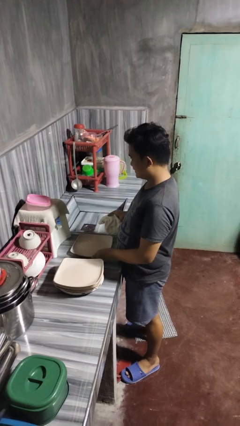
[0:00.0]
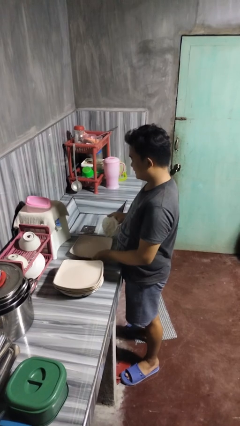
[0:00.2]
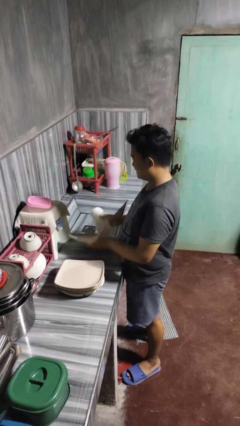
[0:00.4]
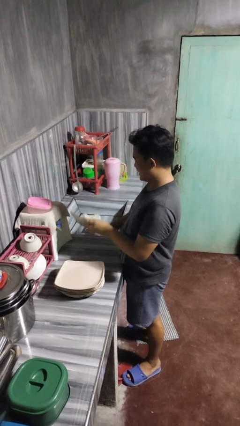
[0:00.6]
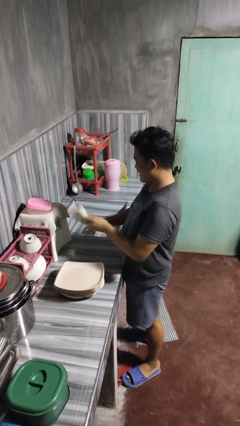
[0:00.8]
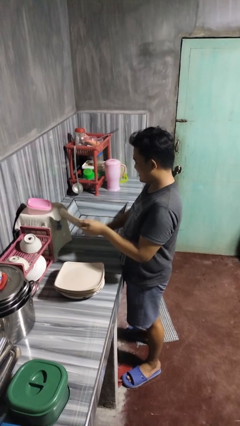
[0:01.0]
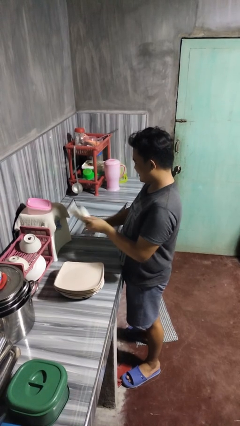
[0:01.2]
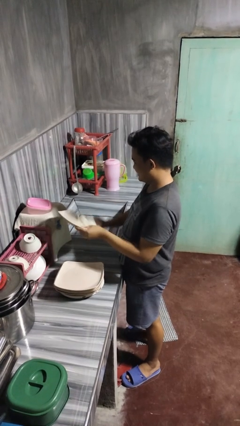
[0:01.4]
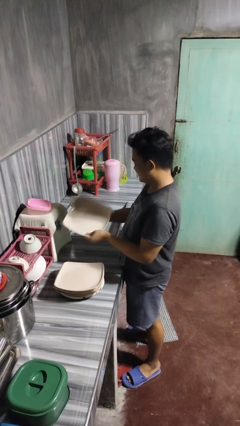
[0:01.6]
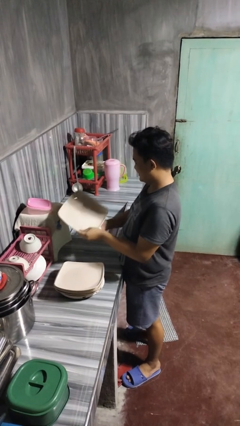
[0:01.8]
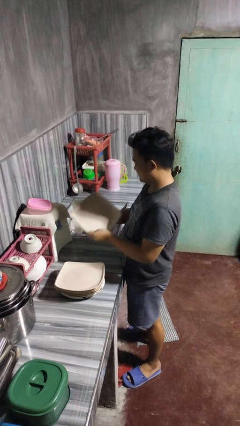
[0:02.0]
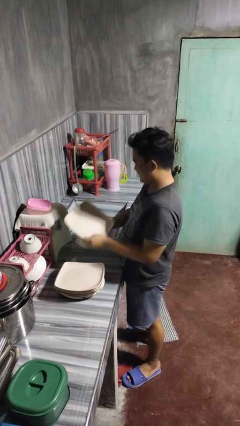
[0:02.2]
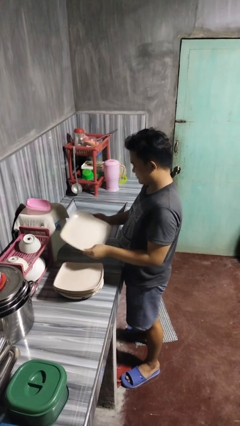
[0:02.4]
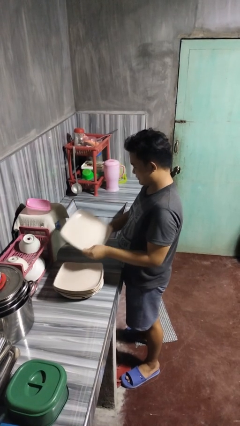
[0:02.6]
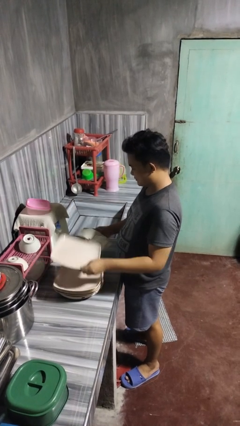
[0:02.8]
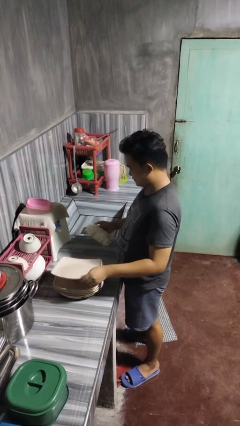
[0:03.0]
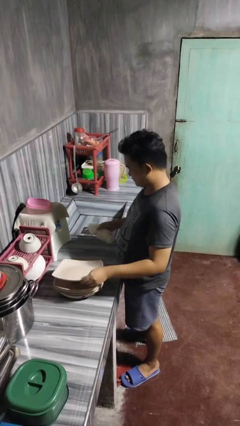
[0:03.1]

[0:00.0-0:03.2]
person dries dish

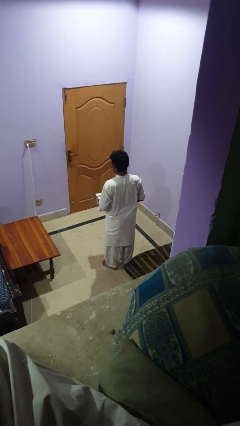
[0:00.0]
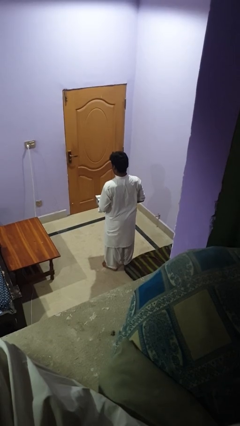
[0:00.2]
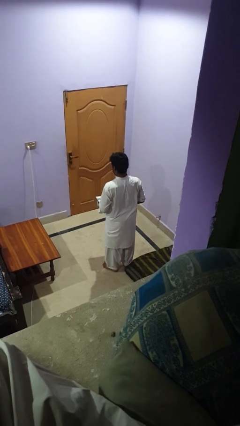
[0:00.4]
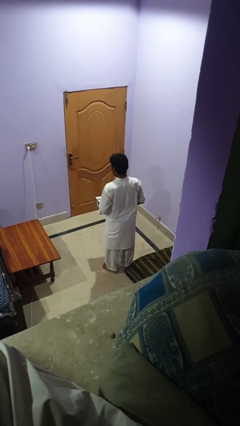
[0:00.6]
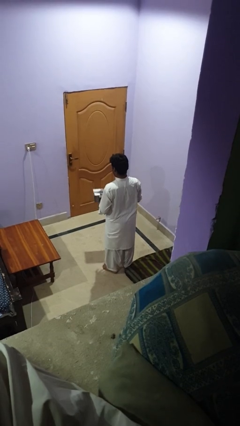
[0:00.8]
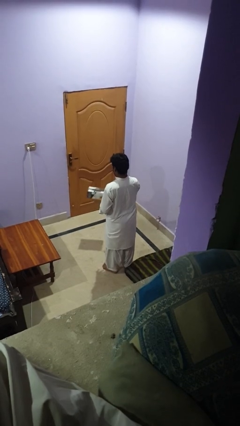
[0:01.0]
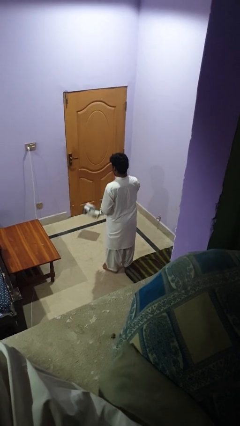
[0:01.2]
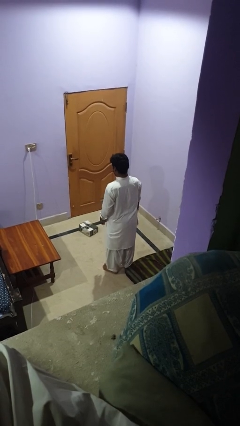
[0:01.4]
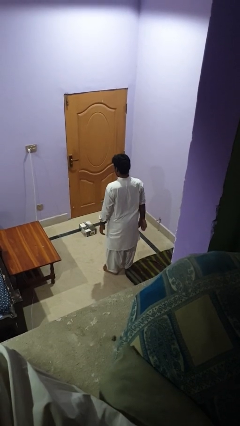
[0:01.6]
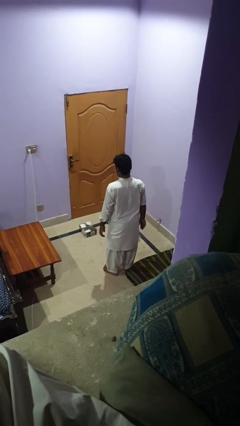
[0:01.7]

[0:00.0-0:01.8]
person throws object to ground

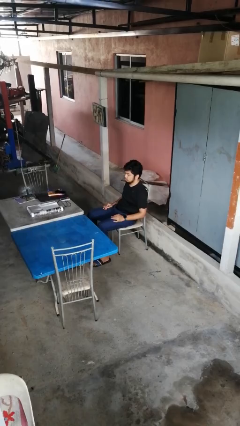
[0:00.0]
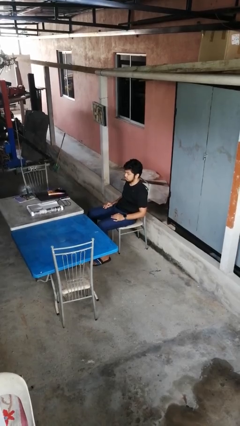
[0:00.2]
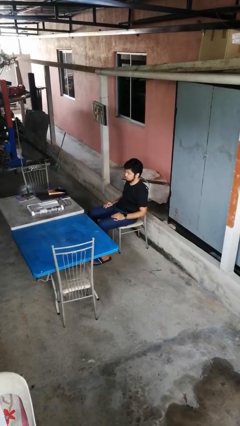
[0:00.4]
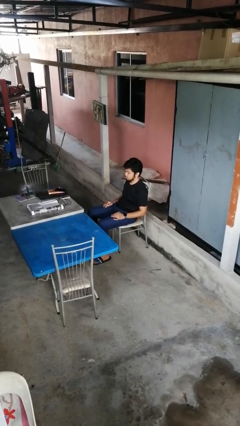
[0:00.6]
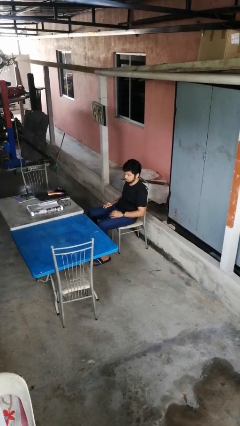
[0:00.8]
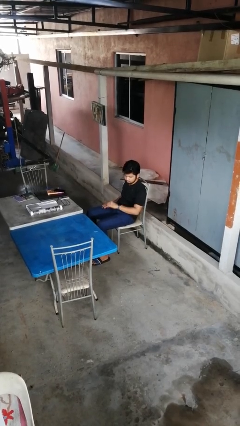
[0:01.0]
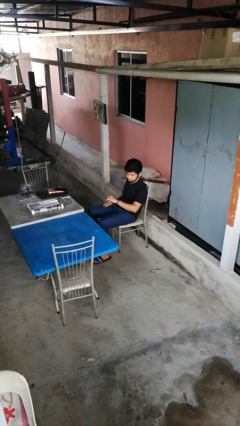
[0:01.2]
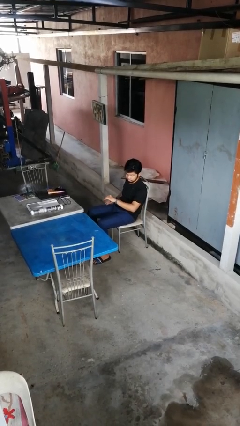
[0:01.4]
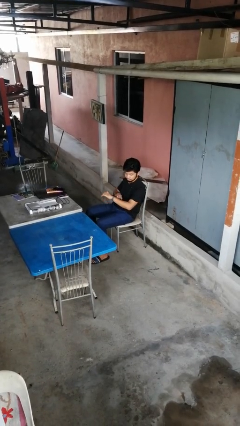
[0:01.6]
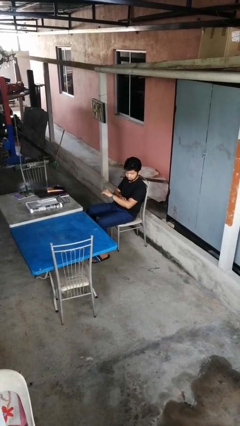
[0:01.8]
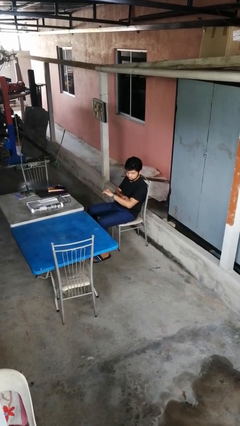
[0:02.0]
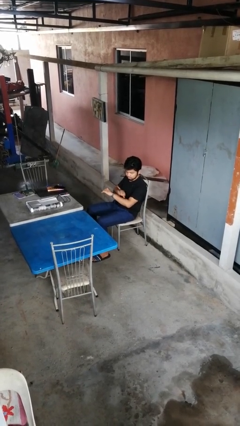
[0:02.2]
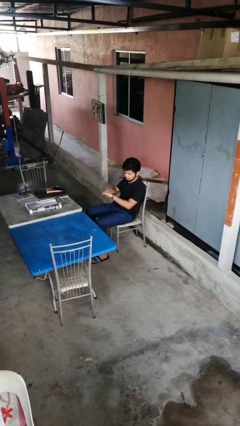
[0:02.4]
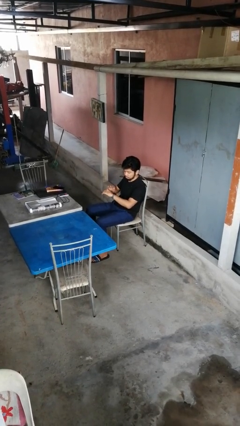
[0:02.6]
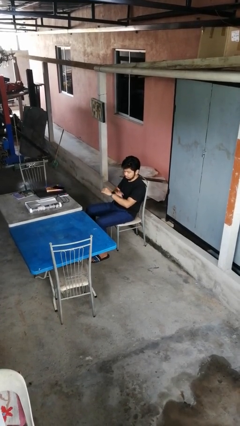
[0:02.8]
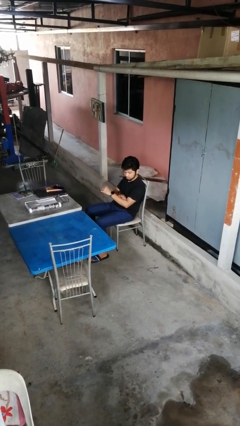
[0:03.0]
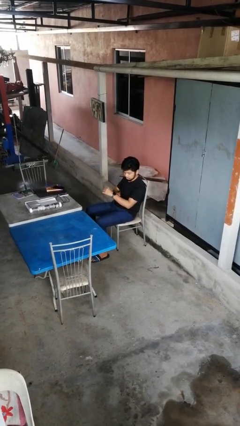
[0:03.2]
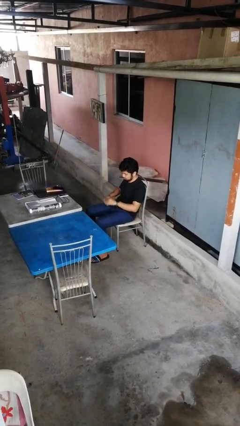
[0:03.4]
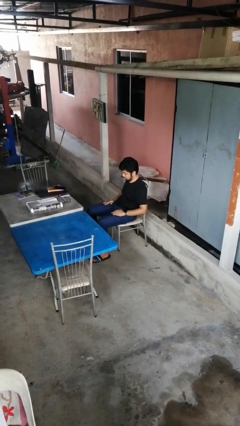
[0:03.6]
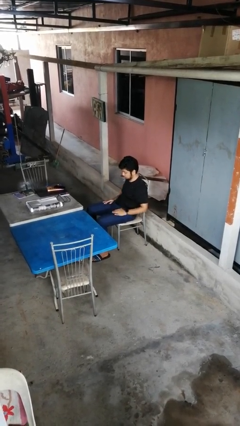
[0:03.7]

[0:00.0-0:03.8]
person looks at hands in lap

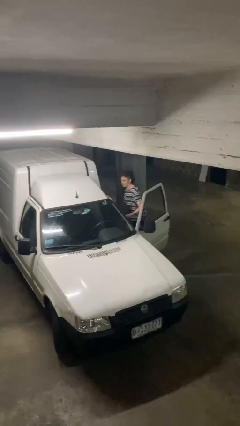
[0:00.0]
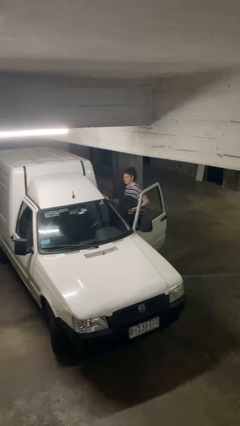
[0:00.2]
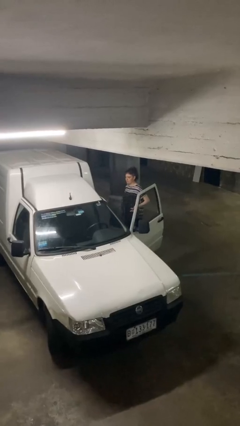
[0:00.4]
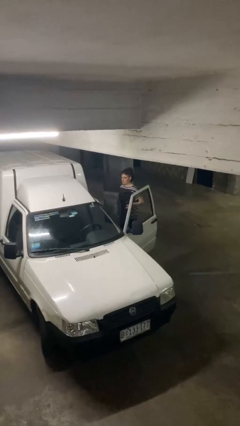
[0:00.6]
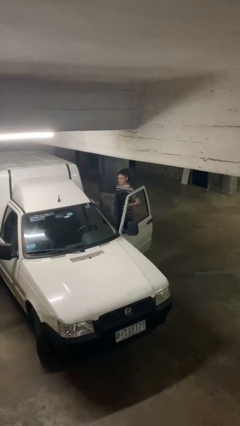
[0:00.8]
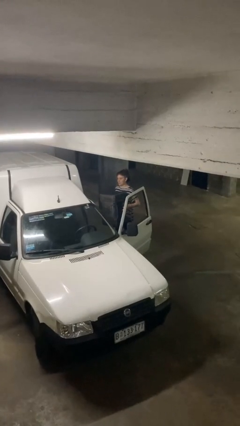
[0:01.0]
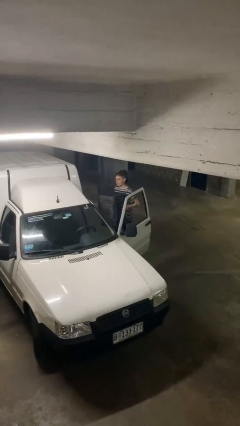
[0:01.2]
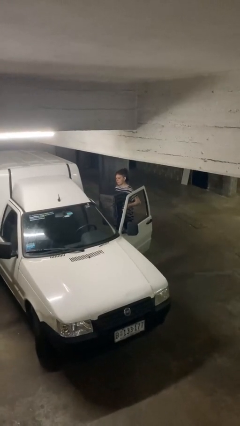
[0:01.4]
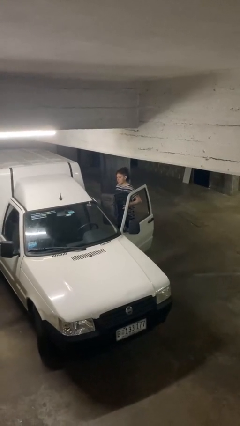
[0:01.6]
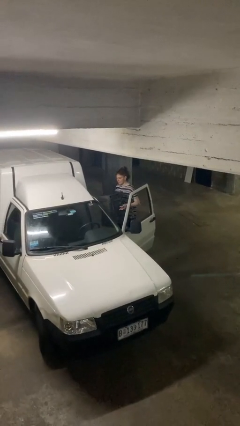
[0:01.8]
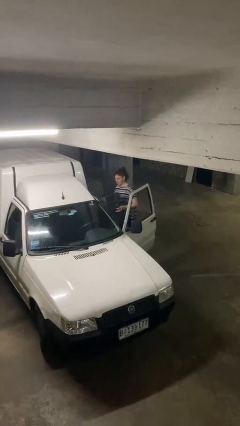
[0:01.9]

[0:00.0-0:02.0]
person unloads car

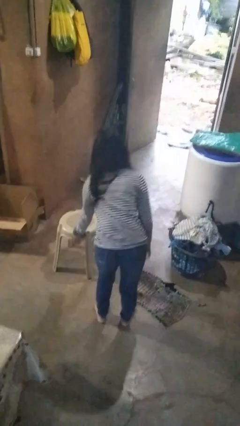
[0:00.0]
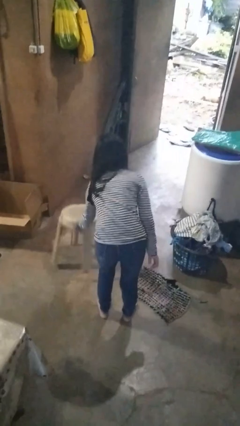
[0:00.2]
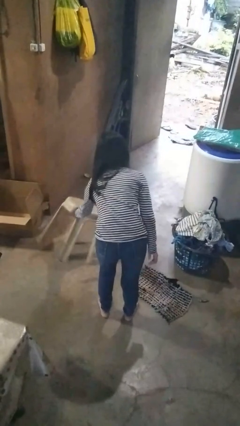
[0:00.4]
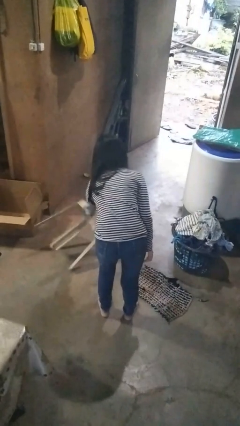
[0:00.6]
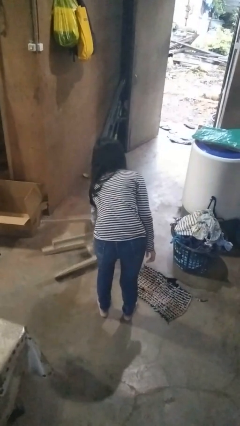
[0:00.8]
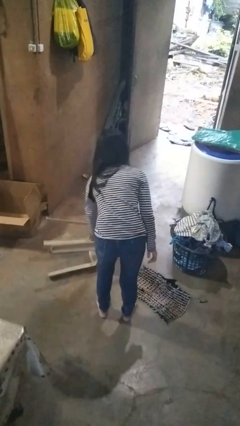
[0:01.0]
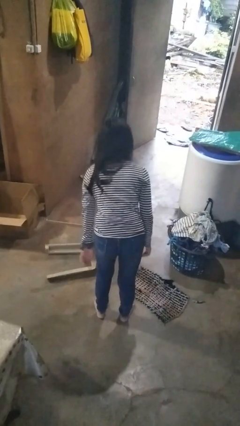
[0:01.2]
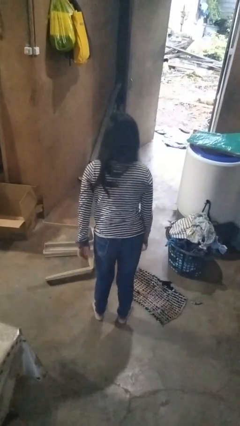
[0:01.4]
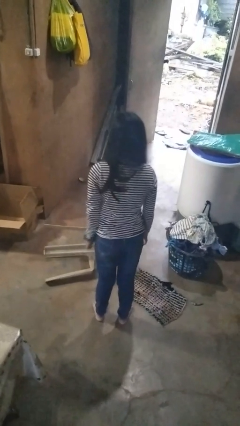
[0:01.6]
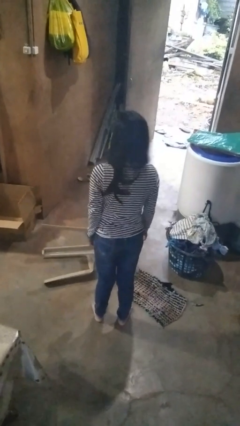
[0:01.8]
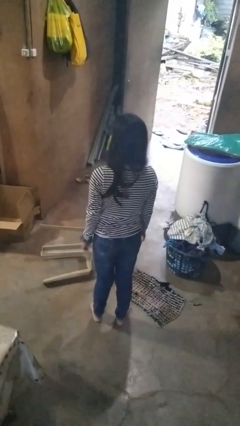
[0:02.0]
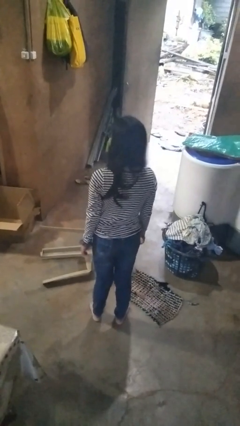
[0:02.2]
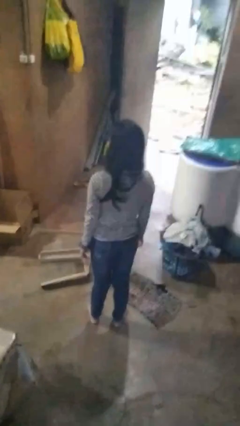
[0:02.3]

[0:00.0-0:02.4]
person knocks over furniture

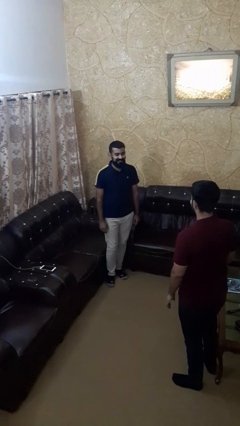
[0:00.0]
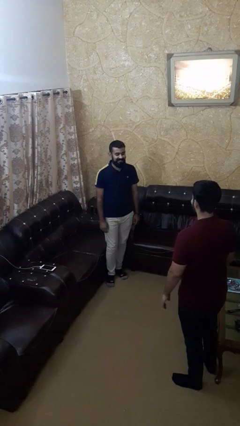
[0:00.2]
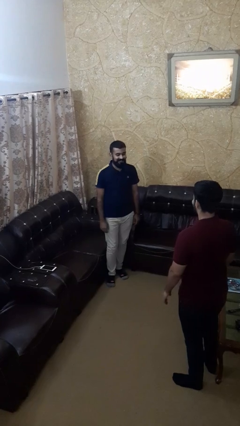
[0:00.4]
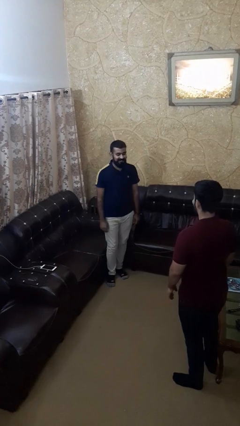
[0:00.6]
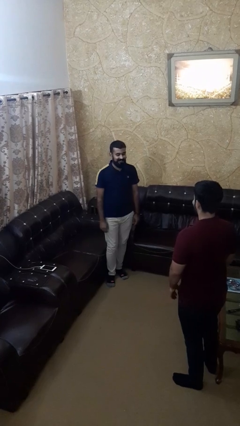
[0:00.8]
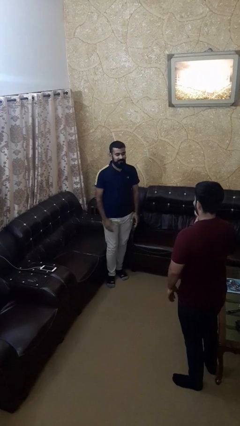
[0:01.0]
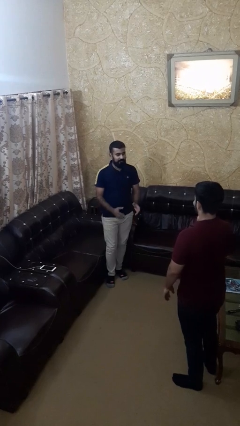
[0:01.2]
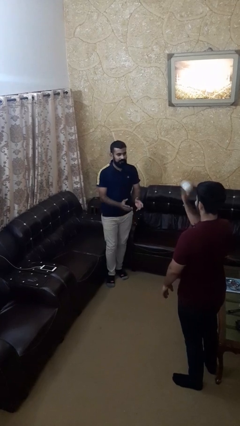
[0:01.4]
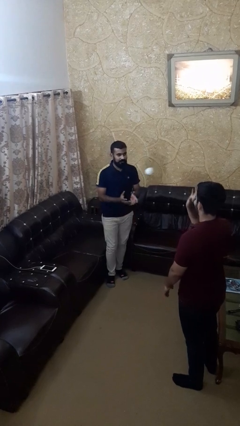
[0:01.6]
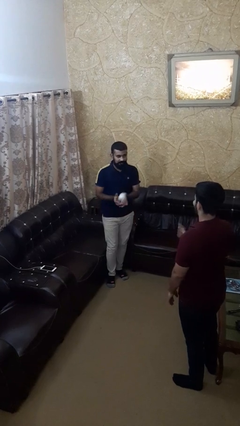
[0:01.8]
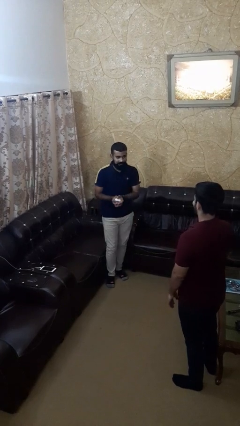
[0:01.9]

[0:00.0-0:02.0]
person catches object from person

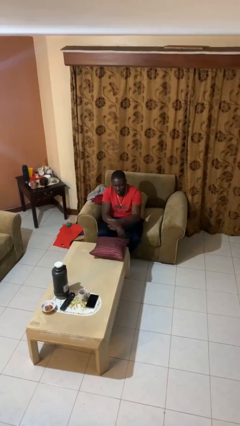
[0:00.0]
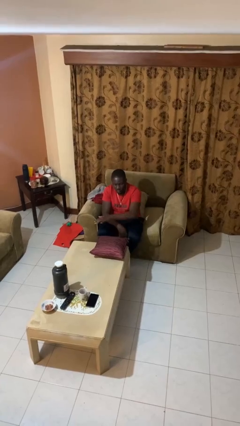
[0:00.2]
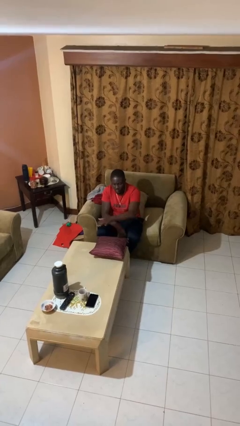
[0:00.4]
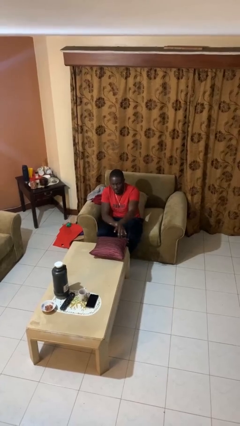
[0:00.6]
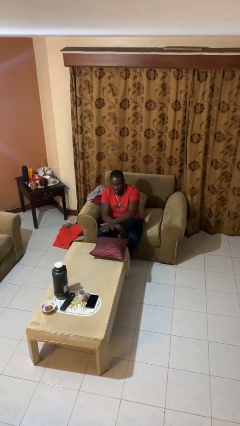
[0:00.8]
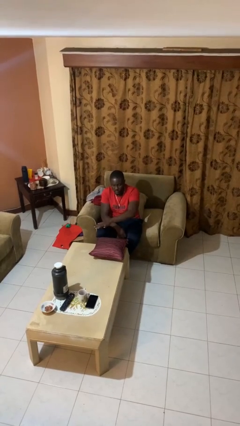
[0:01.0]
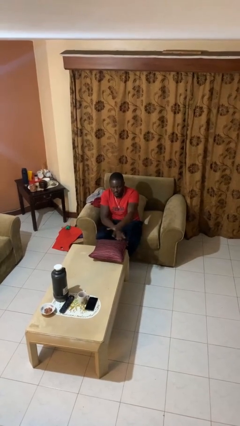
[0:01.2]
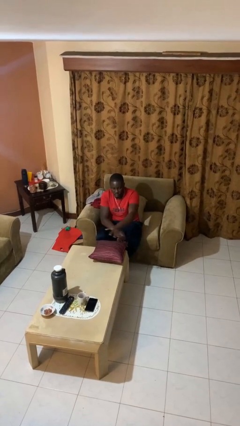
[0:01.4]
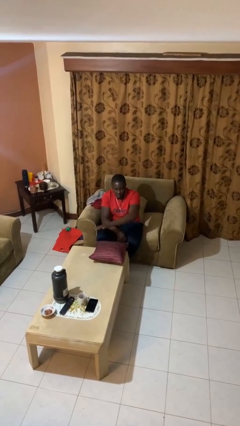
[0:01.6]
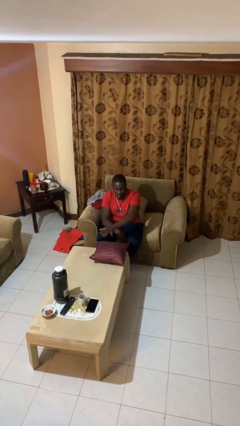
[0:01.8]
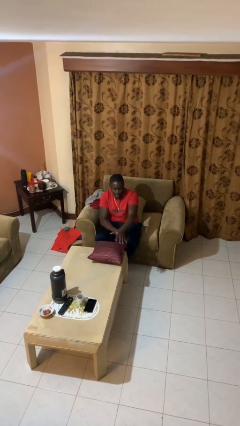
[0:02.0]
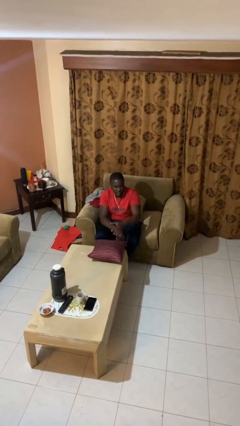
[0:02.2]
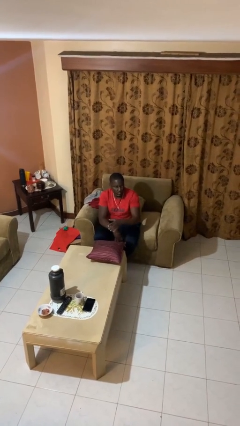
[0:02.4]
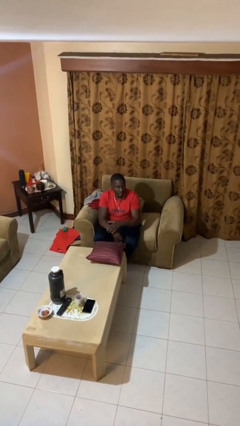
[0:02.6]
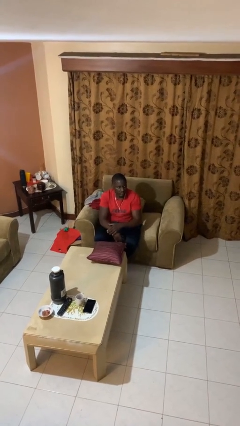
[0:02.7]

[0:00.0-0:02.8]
person waves hand over object
